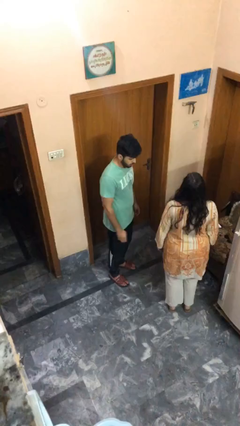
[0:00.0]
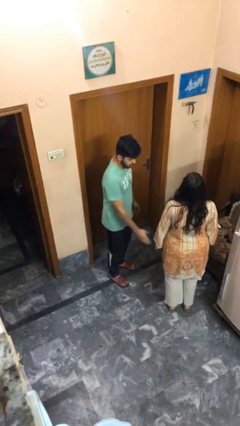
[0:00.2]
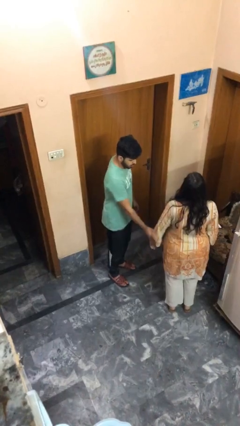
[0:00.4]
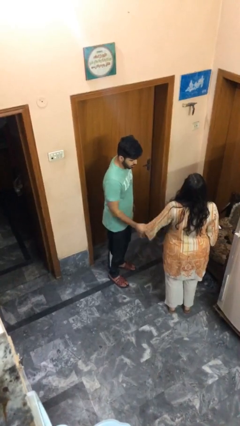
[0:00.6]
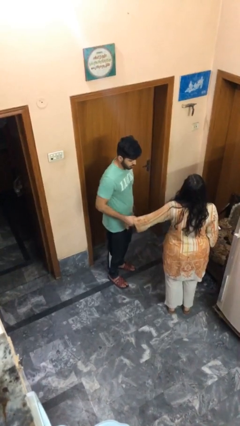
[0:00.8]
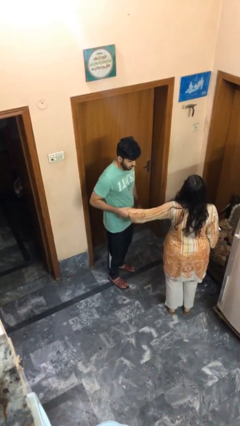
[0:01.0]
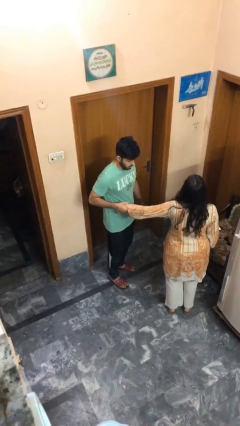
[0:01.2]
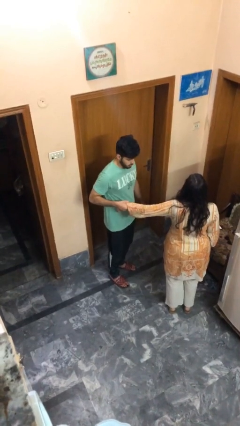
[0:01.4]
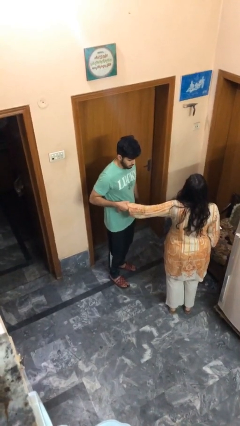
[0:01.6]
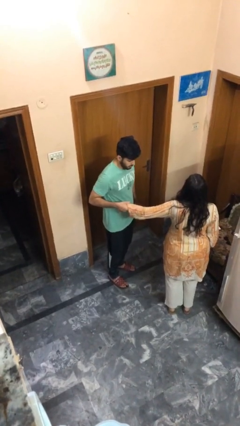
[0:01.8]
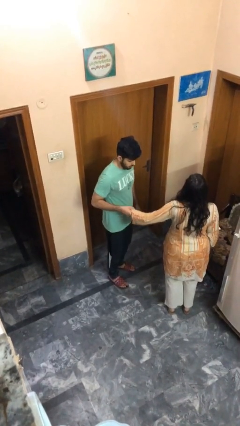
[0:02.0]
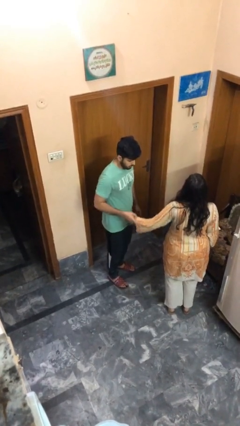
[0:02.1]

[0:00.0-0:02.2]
person grabs person by forearm

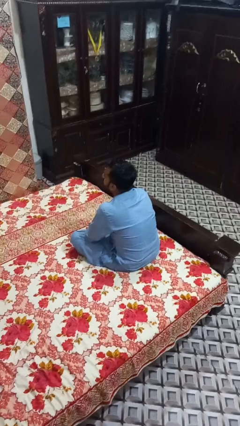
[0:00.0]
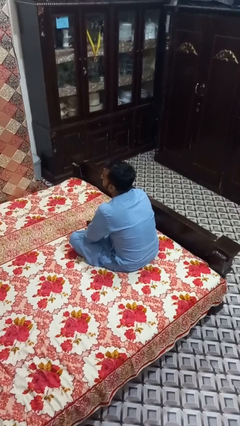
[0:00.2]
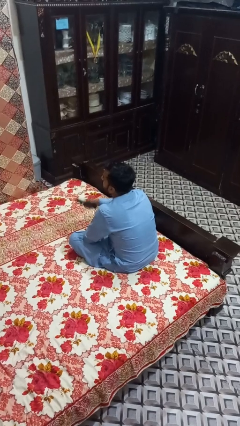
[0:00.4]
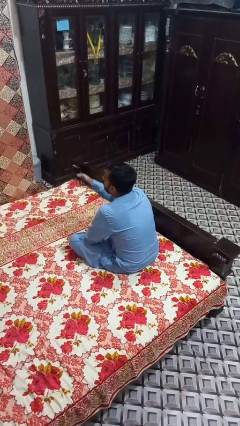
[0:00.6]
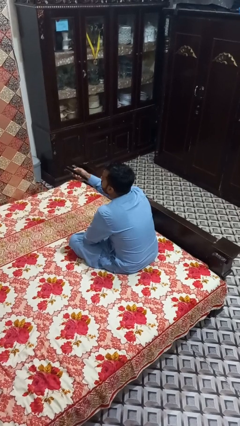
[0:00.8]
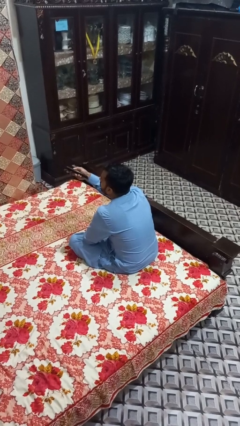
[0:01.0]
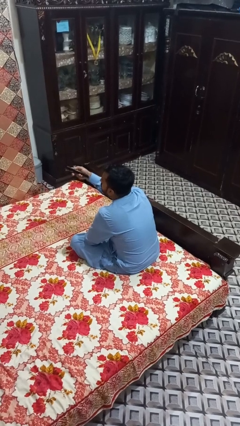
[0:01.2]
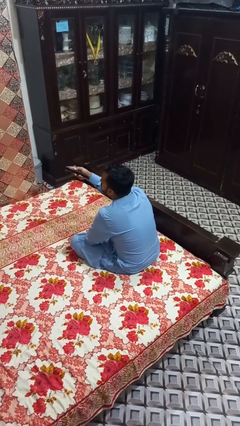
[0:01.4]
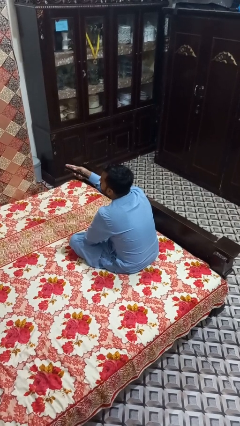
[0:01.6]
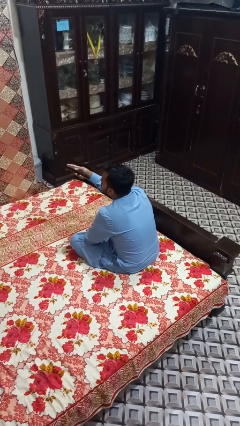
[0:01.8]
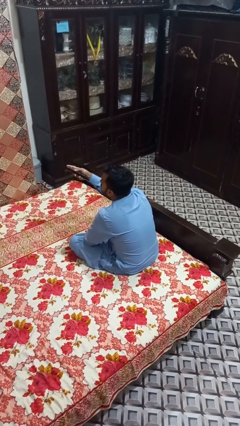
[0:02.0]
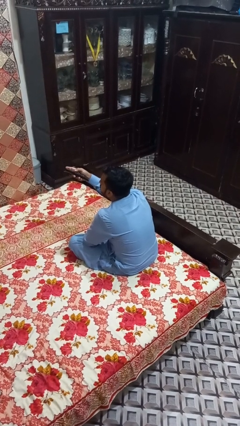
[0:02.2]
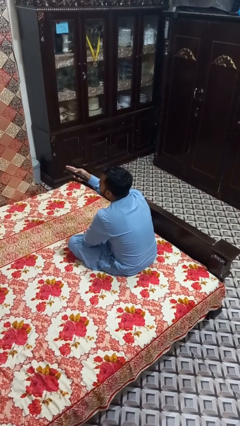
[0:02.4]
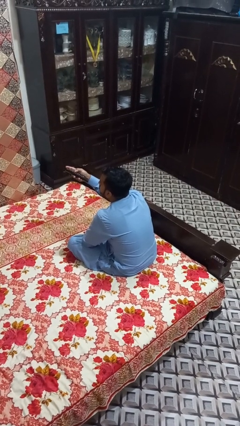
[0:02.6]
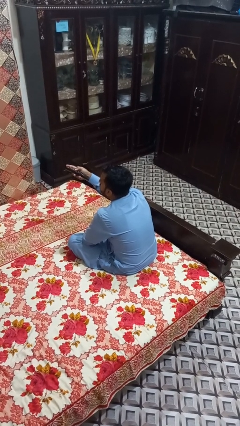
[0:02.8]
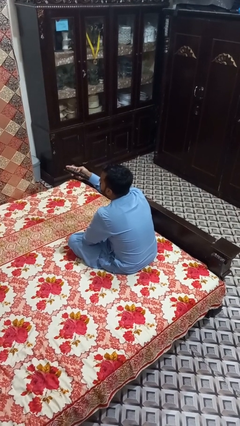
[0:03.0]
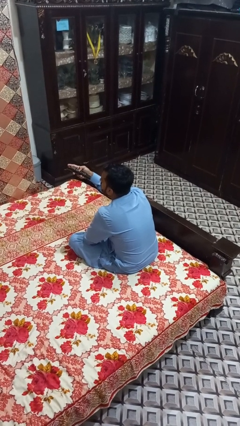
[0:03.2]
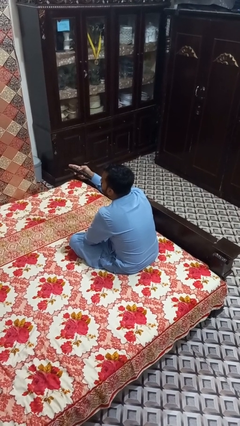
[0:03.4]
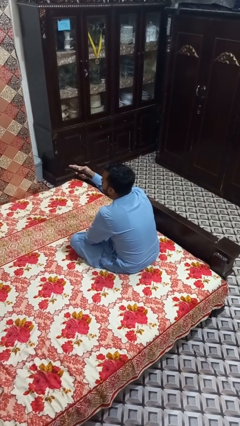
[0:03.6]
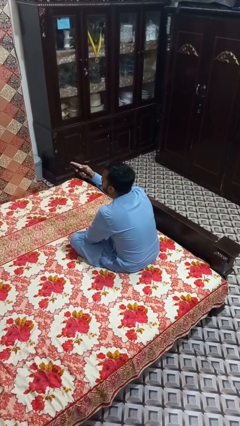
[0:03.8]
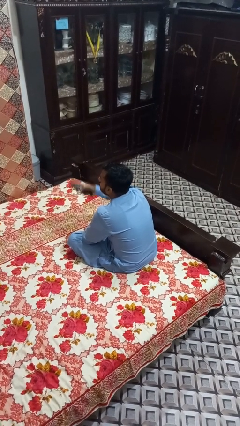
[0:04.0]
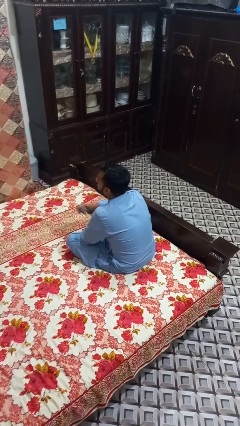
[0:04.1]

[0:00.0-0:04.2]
person uses television remote

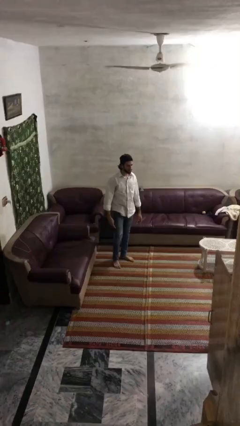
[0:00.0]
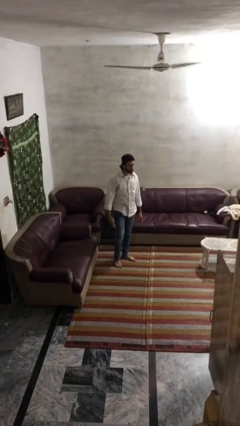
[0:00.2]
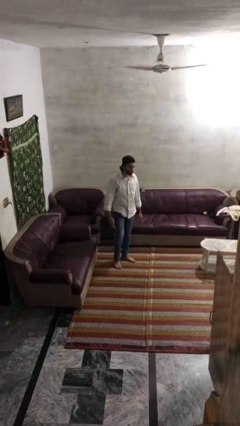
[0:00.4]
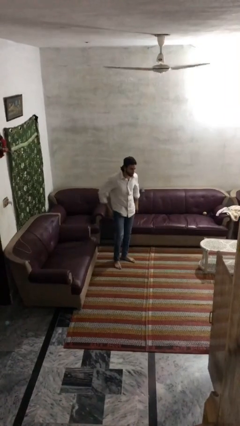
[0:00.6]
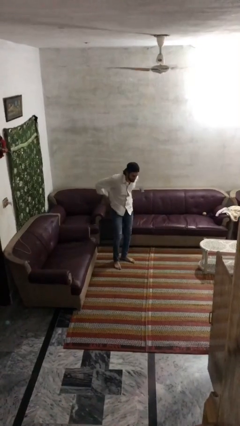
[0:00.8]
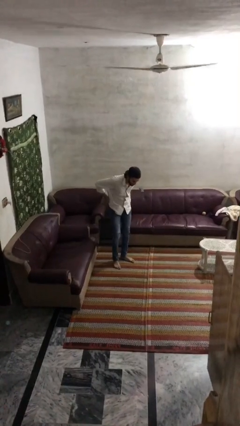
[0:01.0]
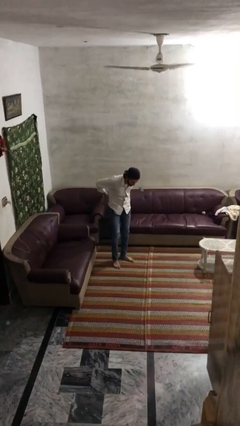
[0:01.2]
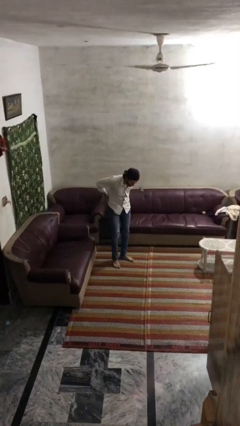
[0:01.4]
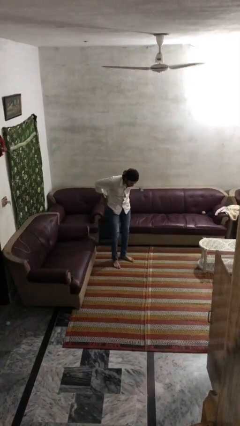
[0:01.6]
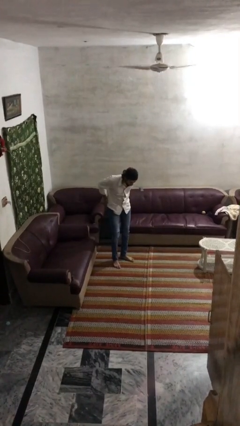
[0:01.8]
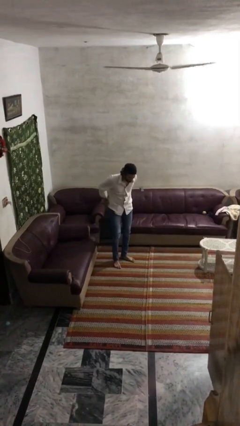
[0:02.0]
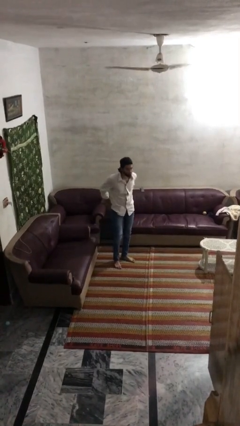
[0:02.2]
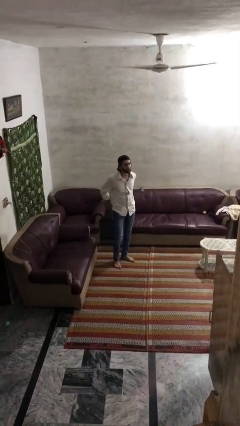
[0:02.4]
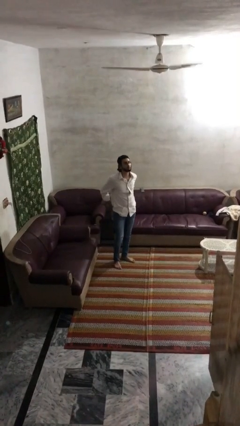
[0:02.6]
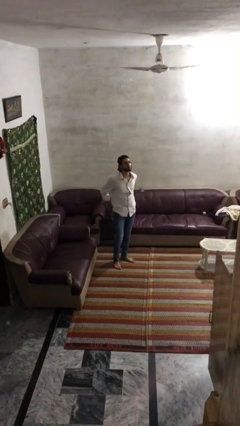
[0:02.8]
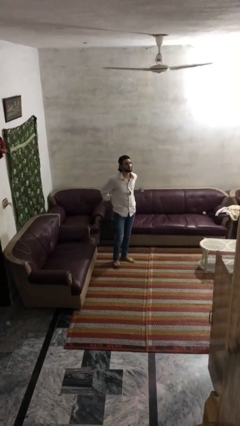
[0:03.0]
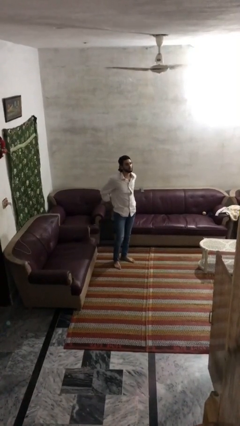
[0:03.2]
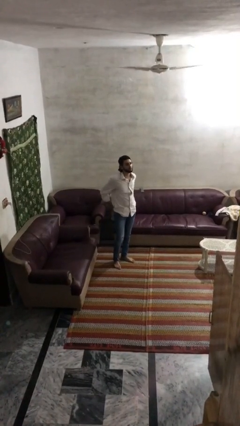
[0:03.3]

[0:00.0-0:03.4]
person puts hands in back pockets

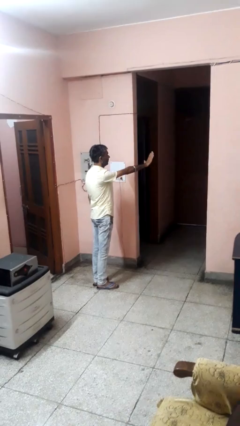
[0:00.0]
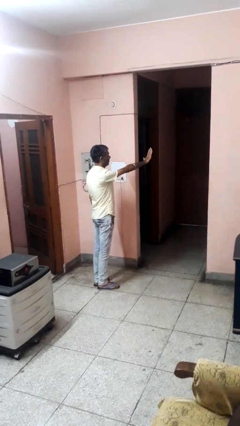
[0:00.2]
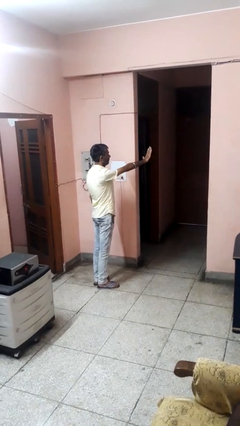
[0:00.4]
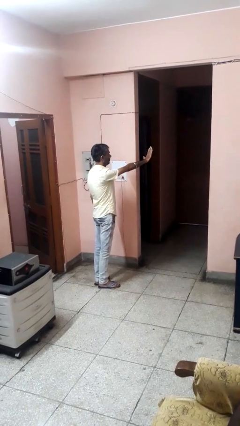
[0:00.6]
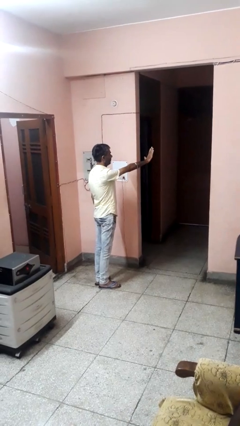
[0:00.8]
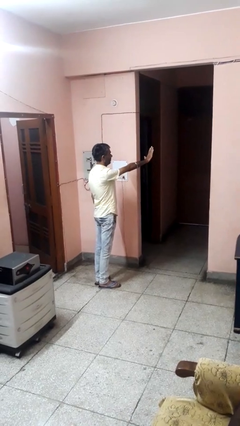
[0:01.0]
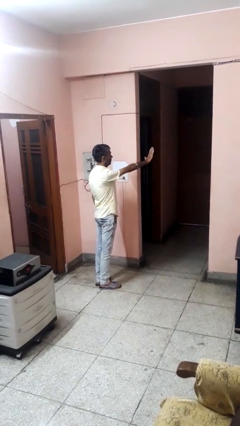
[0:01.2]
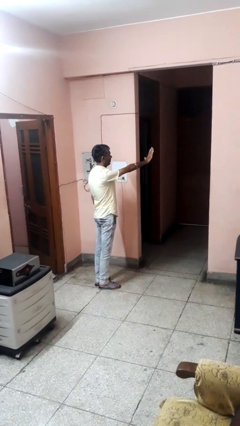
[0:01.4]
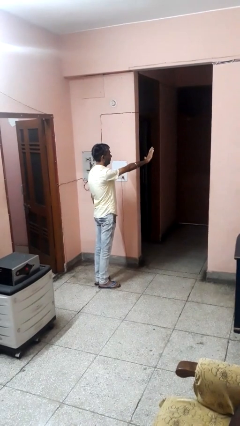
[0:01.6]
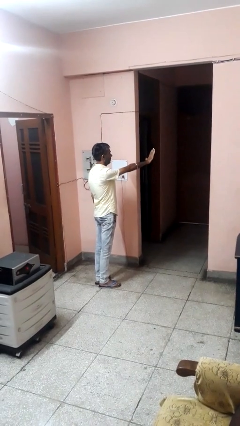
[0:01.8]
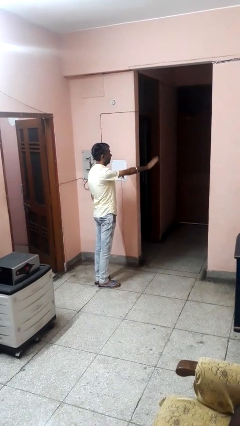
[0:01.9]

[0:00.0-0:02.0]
person gestures stop

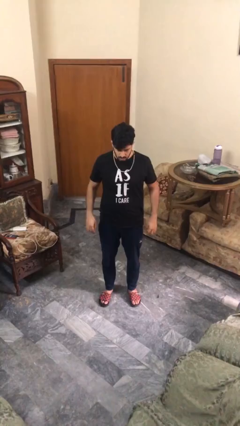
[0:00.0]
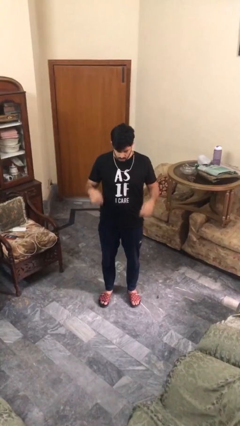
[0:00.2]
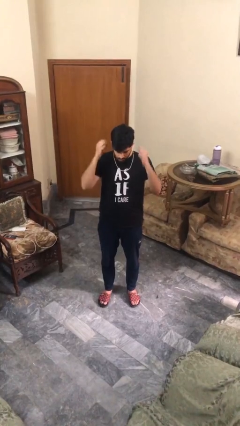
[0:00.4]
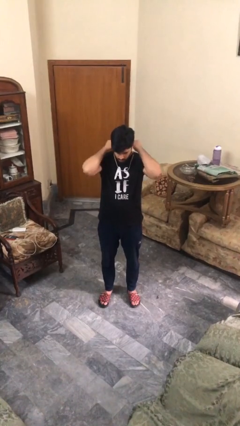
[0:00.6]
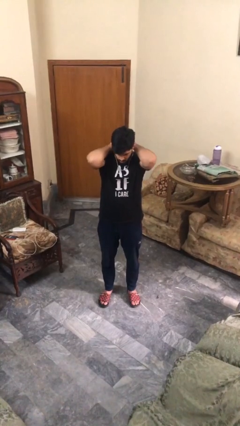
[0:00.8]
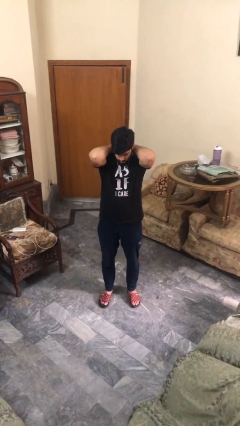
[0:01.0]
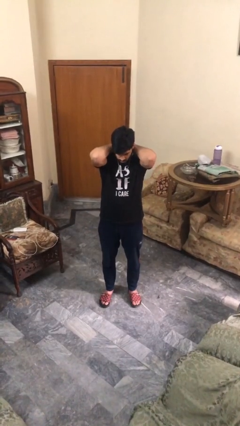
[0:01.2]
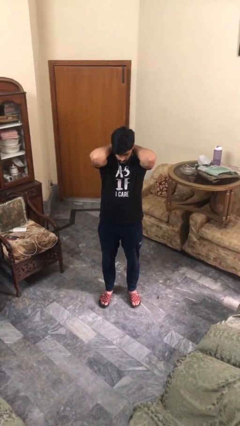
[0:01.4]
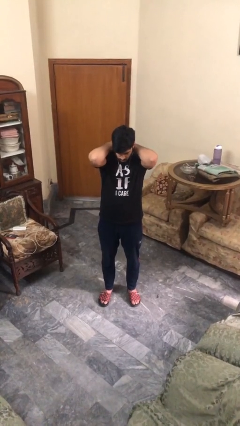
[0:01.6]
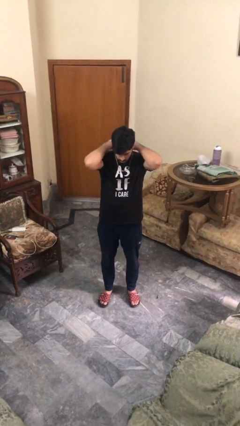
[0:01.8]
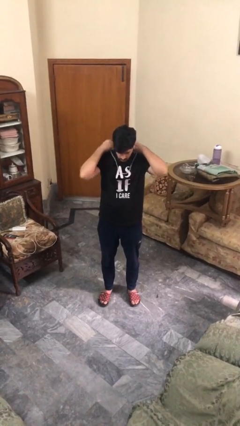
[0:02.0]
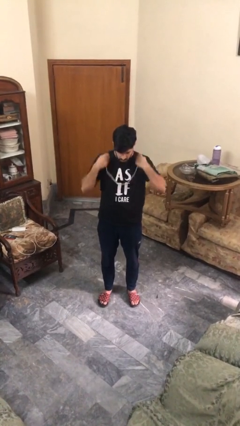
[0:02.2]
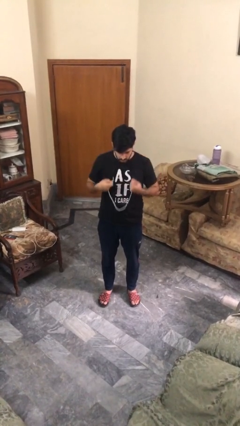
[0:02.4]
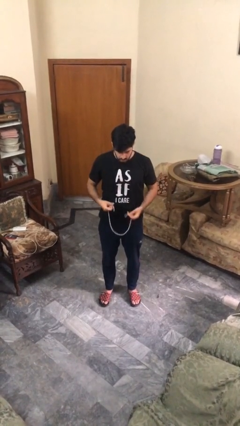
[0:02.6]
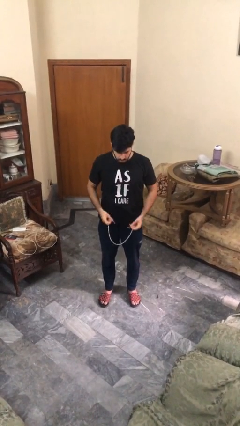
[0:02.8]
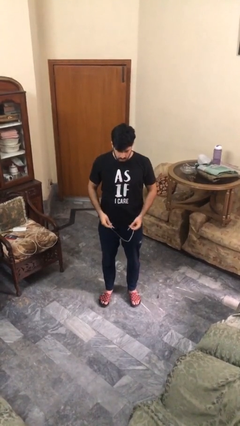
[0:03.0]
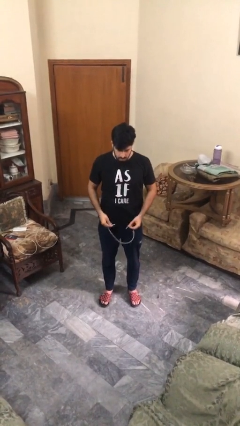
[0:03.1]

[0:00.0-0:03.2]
person takes off necklace

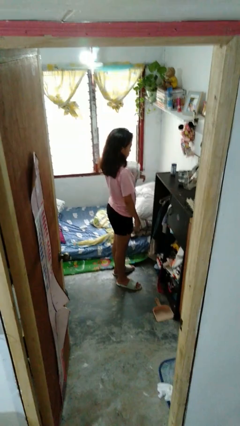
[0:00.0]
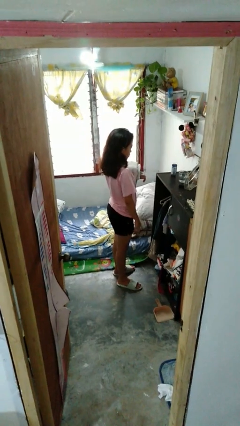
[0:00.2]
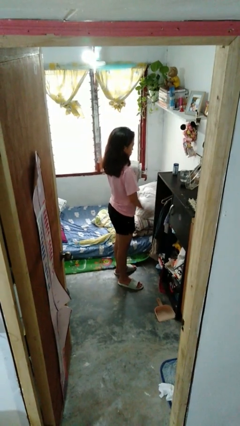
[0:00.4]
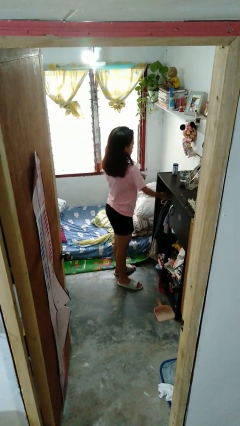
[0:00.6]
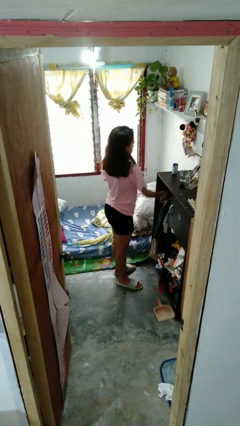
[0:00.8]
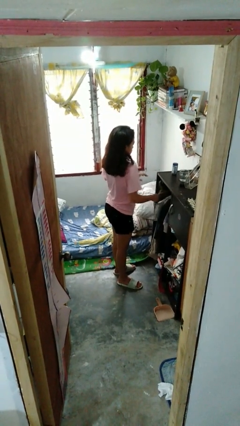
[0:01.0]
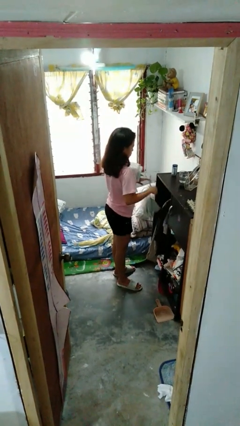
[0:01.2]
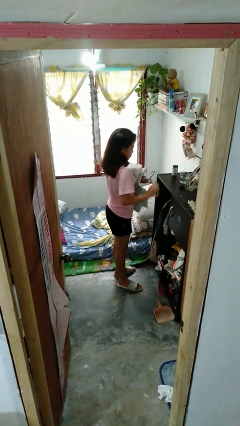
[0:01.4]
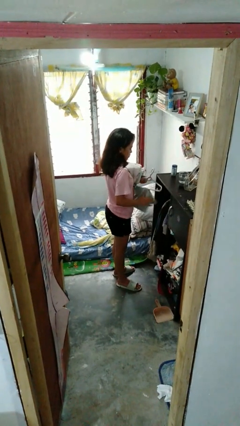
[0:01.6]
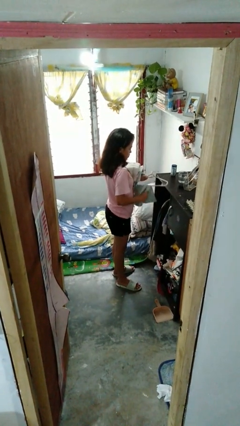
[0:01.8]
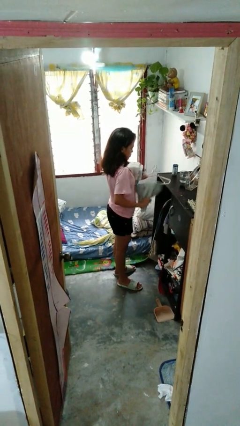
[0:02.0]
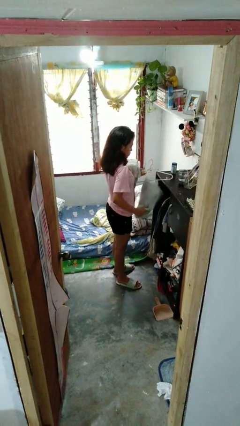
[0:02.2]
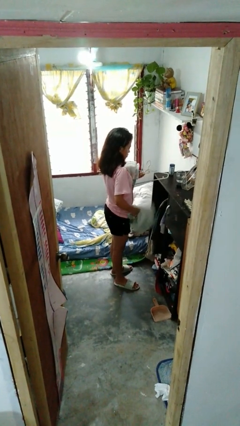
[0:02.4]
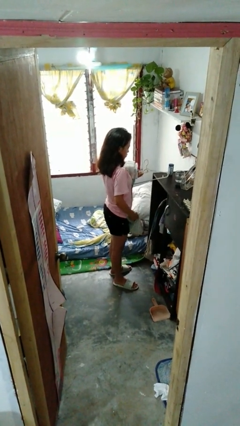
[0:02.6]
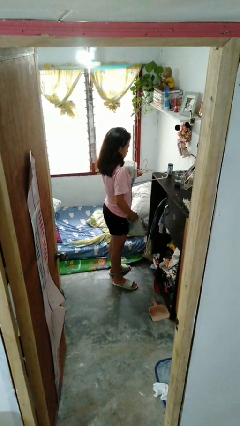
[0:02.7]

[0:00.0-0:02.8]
person takes clothes from closet
